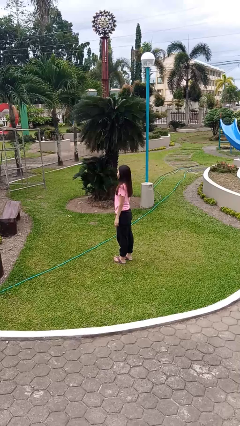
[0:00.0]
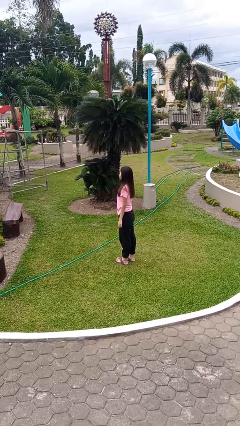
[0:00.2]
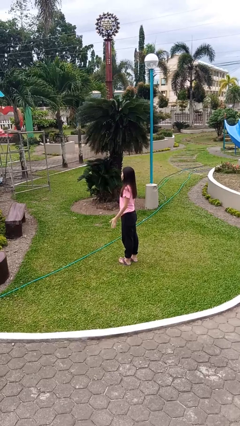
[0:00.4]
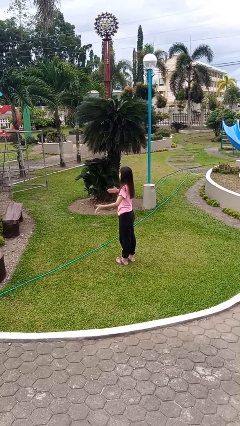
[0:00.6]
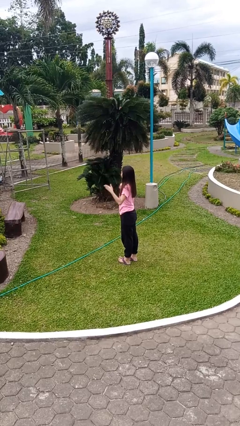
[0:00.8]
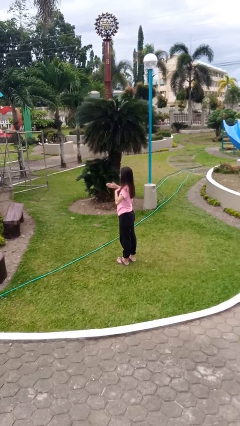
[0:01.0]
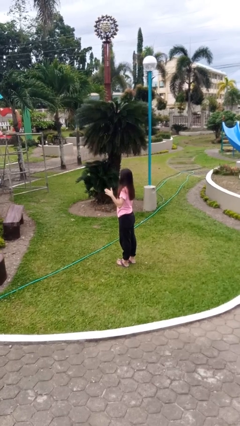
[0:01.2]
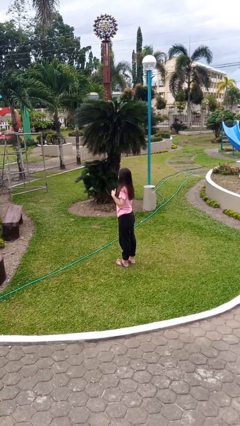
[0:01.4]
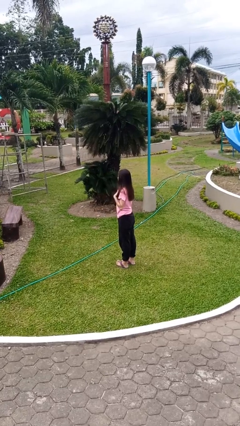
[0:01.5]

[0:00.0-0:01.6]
person drums on chest

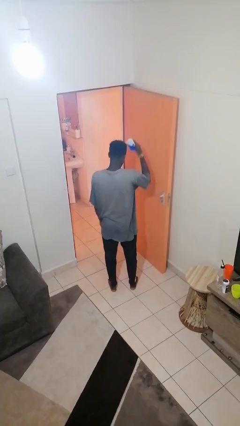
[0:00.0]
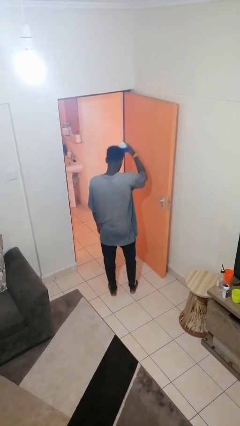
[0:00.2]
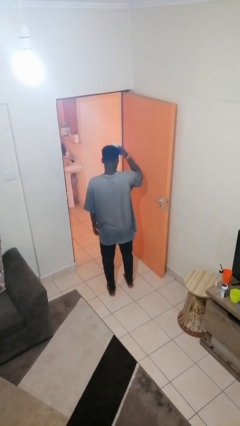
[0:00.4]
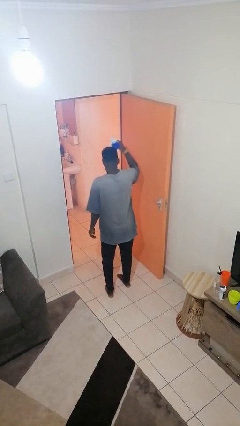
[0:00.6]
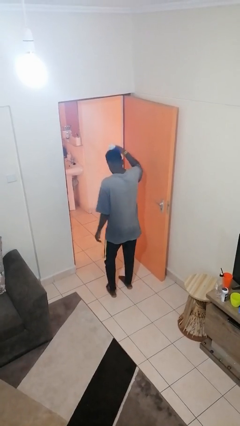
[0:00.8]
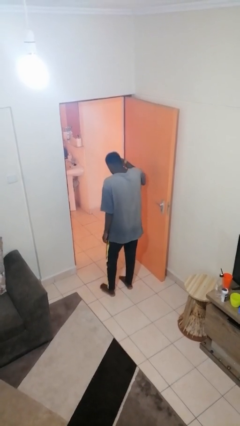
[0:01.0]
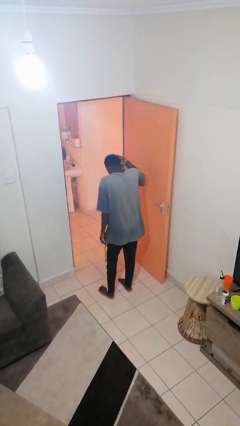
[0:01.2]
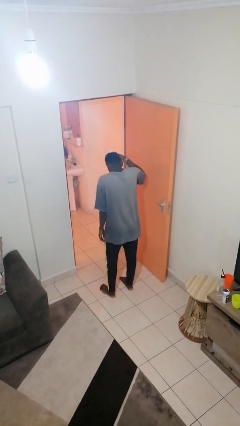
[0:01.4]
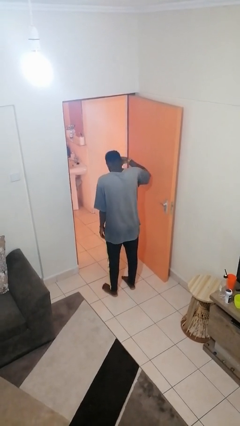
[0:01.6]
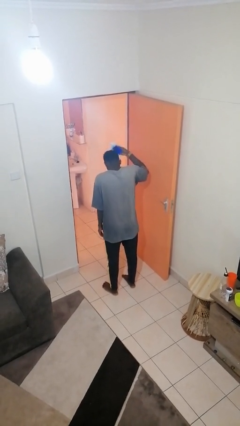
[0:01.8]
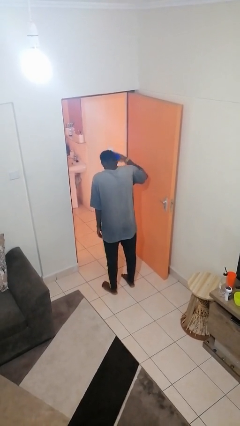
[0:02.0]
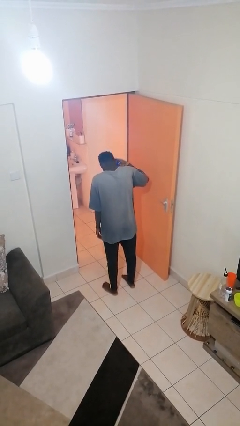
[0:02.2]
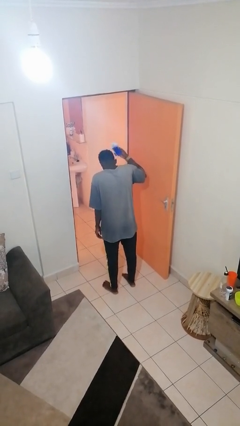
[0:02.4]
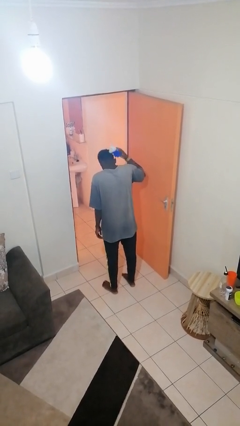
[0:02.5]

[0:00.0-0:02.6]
person brushes hair

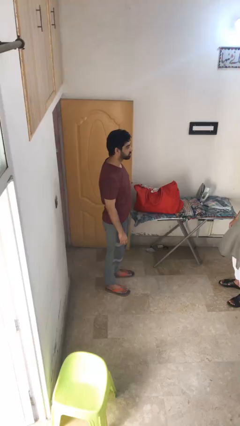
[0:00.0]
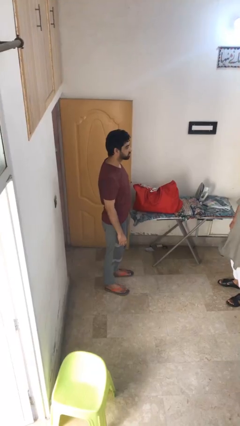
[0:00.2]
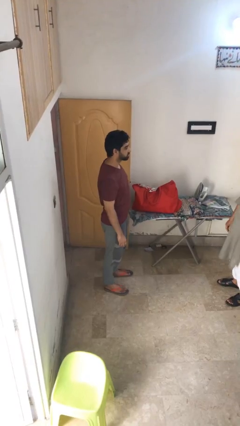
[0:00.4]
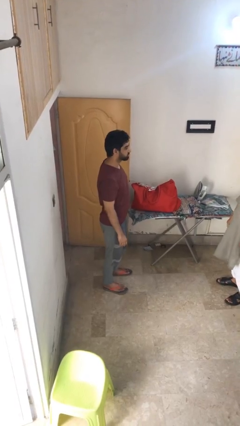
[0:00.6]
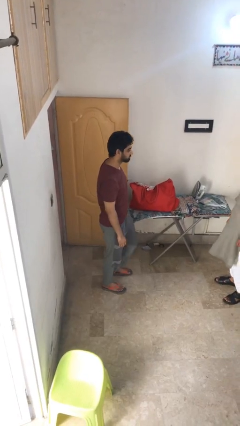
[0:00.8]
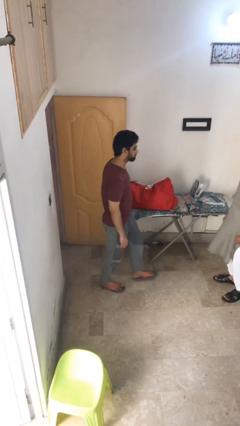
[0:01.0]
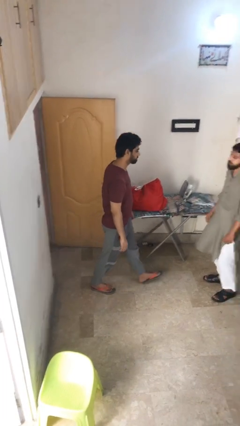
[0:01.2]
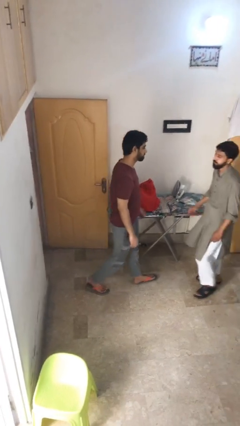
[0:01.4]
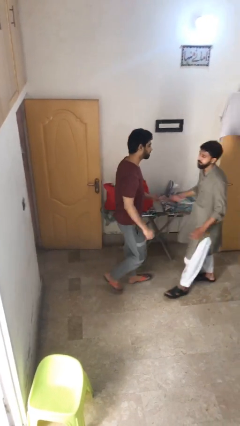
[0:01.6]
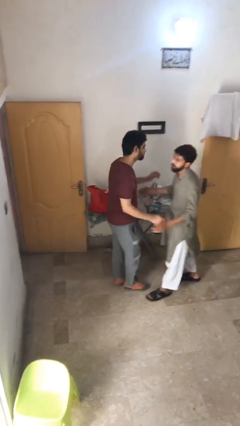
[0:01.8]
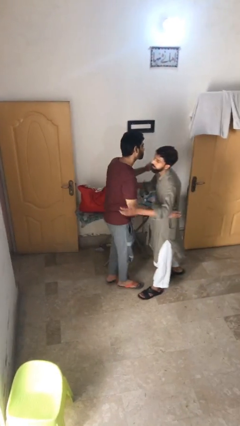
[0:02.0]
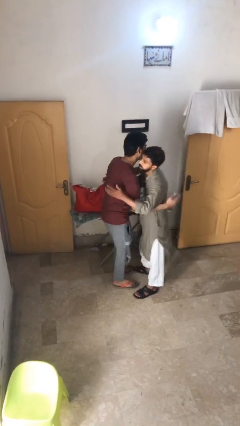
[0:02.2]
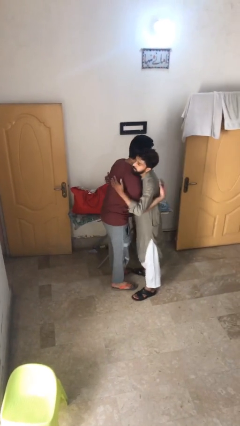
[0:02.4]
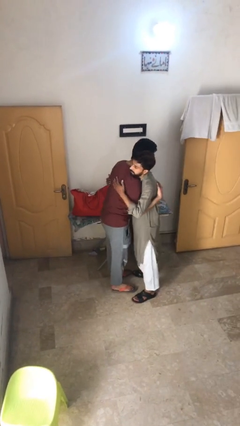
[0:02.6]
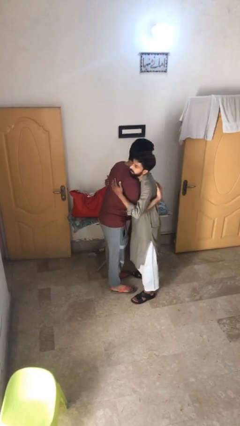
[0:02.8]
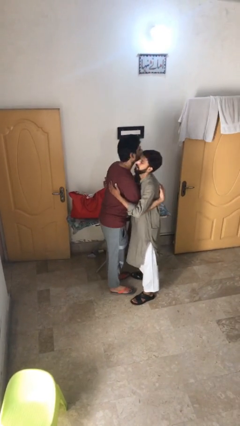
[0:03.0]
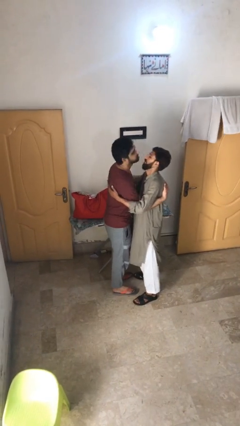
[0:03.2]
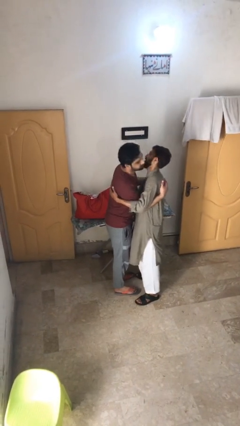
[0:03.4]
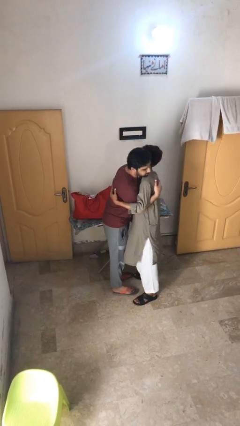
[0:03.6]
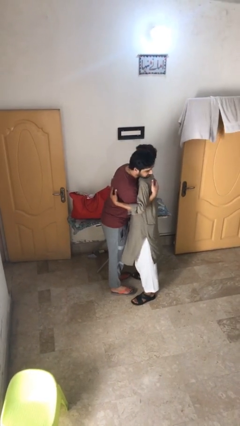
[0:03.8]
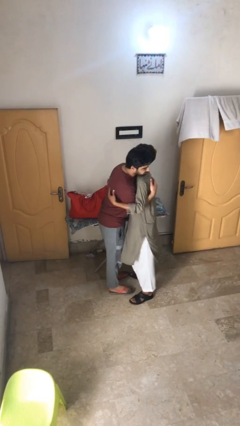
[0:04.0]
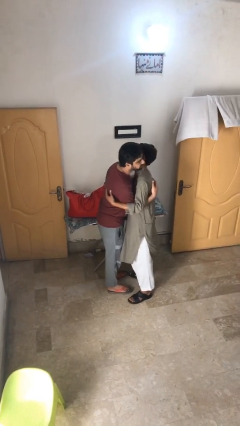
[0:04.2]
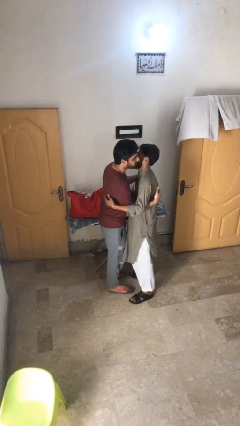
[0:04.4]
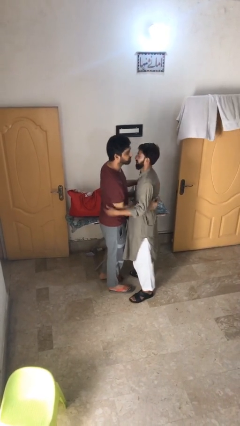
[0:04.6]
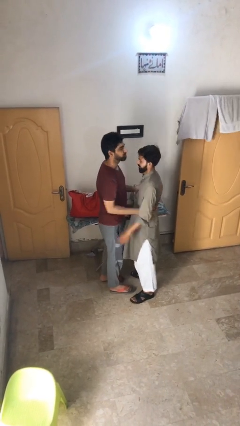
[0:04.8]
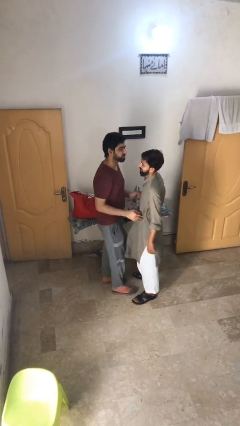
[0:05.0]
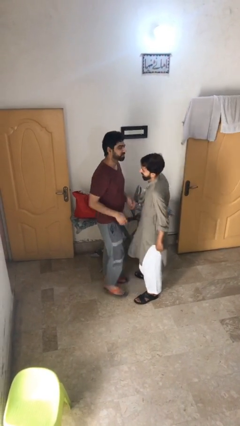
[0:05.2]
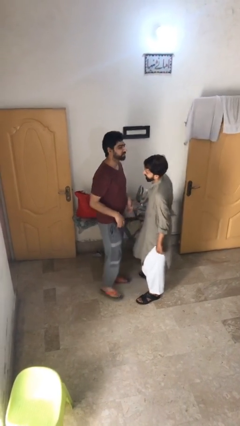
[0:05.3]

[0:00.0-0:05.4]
person embraces person

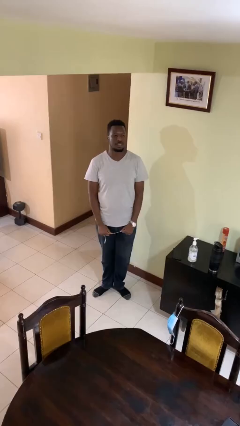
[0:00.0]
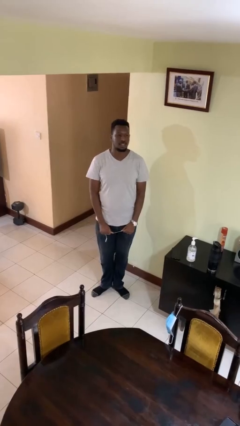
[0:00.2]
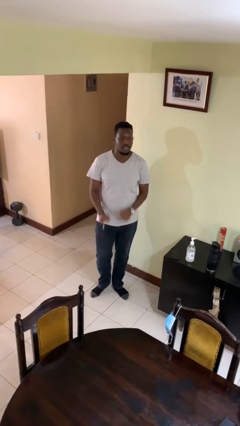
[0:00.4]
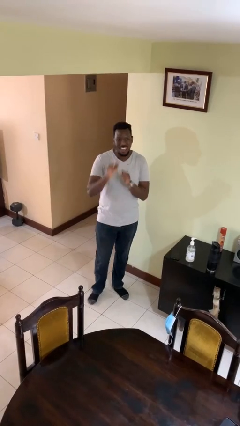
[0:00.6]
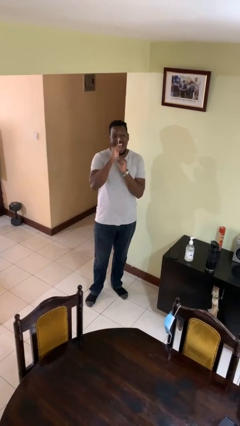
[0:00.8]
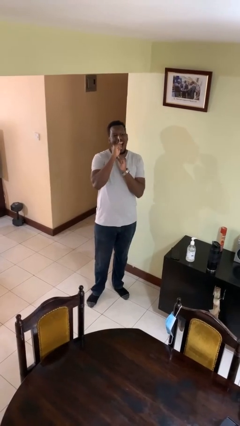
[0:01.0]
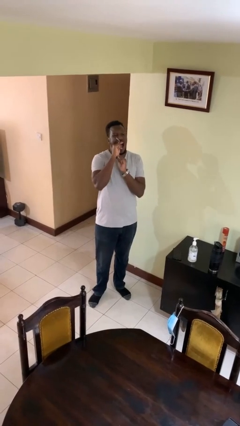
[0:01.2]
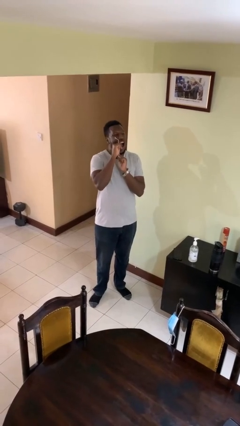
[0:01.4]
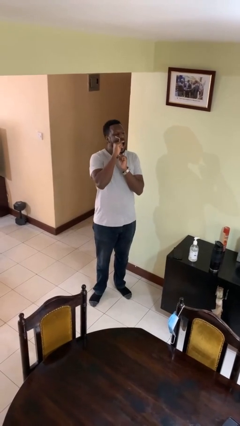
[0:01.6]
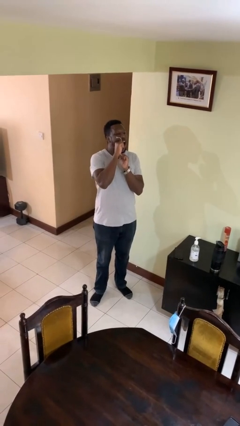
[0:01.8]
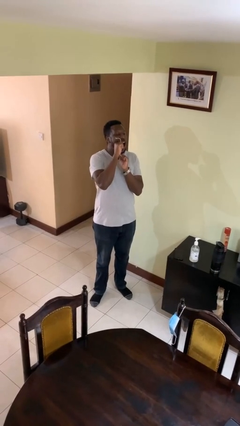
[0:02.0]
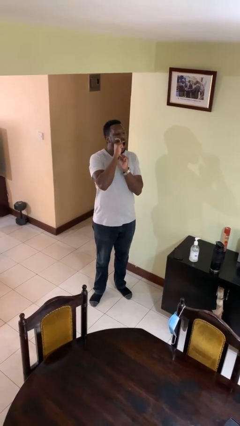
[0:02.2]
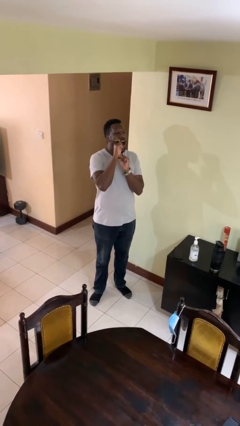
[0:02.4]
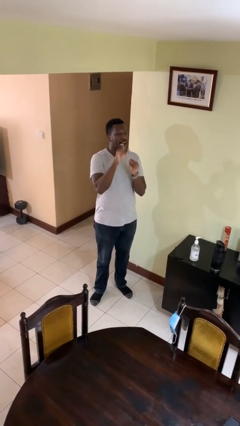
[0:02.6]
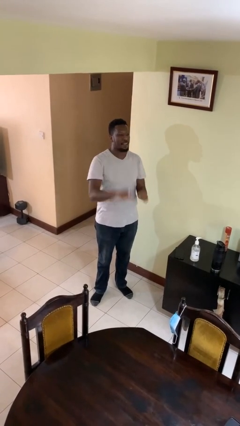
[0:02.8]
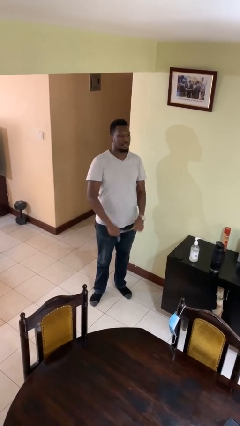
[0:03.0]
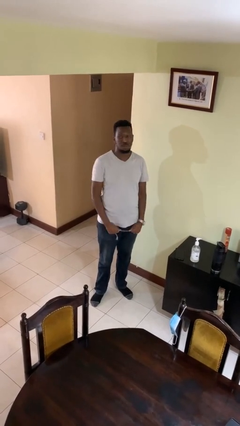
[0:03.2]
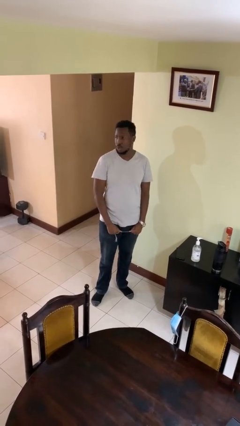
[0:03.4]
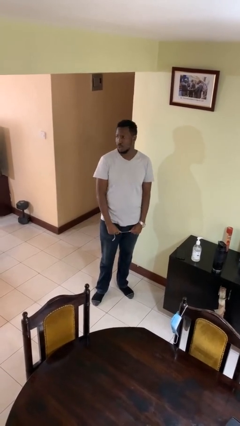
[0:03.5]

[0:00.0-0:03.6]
person flosses

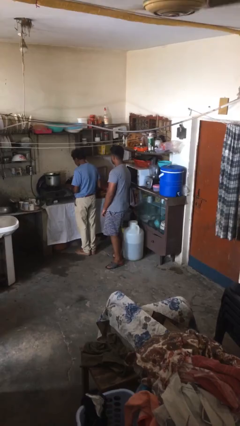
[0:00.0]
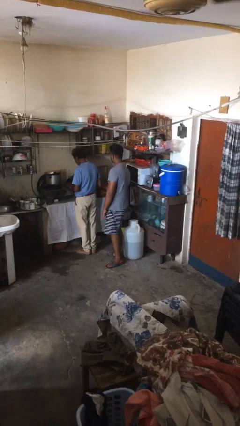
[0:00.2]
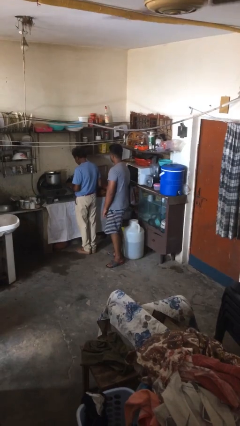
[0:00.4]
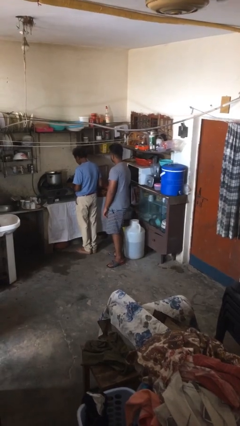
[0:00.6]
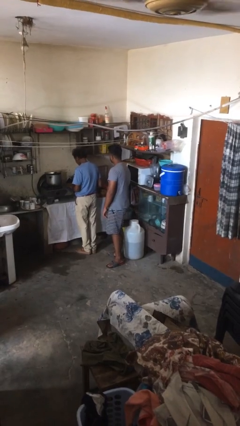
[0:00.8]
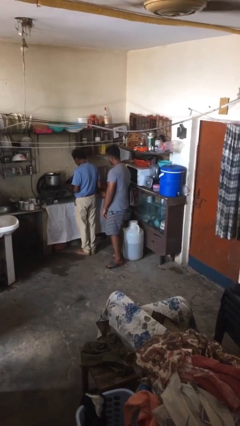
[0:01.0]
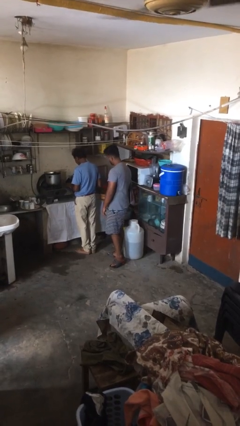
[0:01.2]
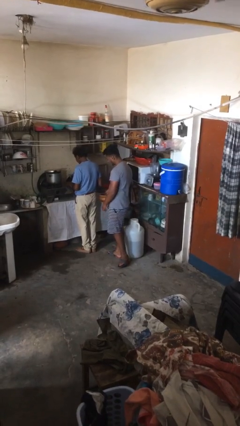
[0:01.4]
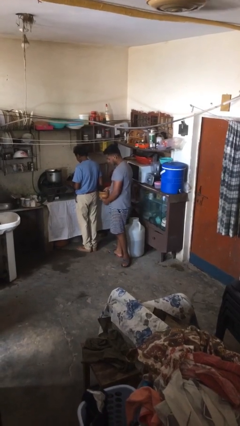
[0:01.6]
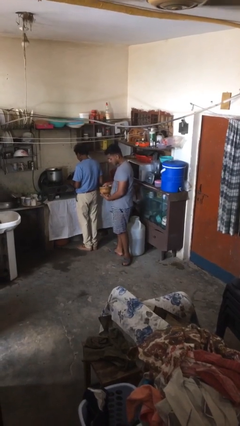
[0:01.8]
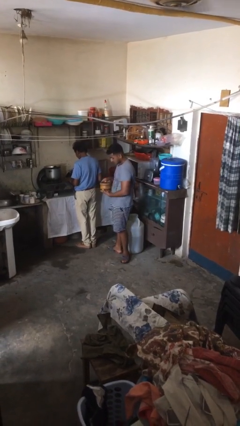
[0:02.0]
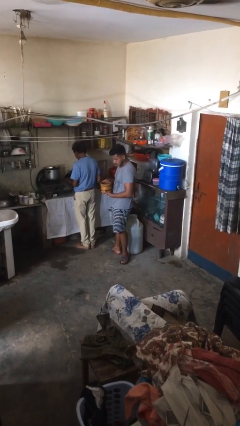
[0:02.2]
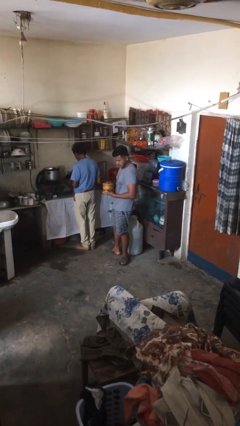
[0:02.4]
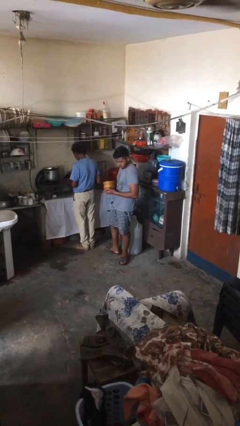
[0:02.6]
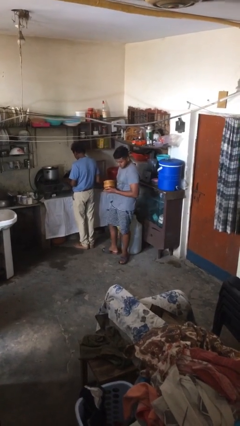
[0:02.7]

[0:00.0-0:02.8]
person steals object from person

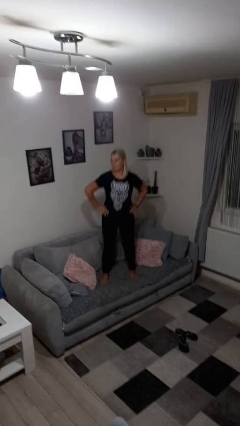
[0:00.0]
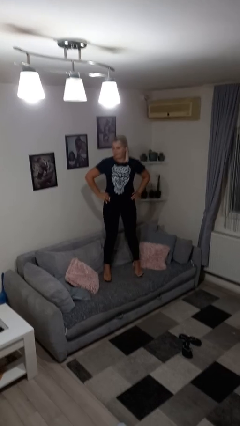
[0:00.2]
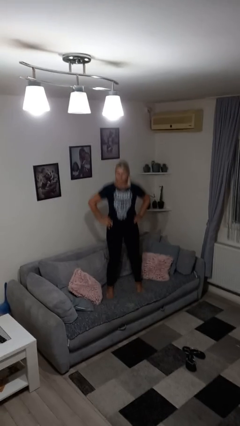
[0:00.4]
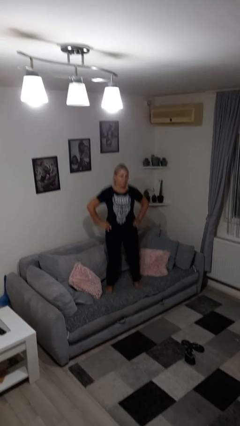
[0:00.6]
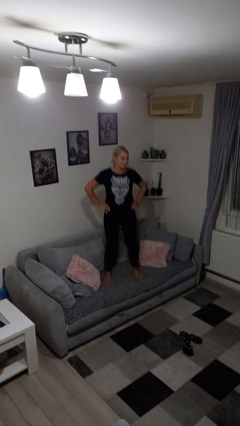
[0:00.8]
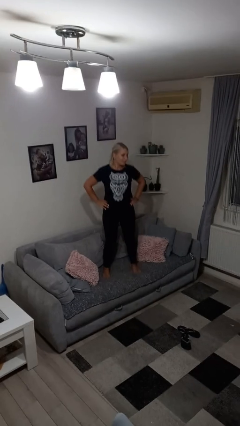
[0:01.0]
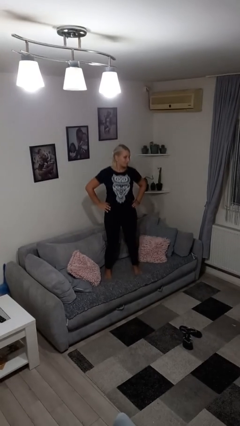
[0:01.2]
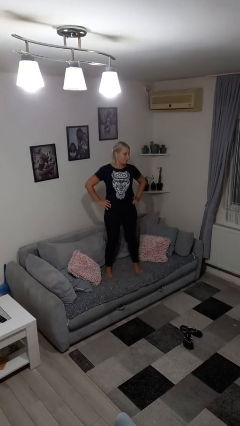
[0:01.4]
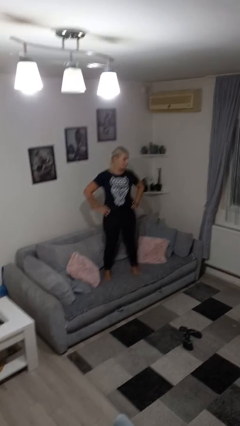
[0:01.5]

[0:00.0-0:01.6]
person jumps on couch
